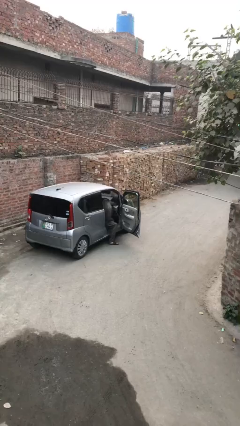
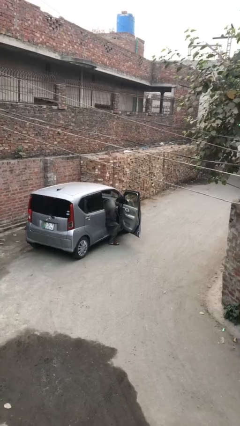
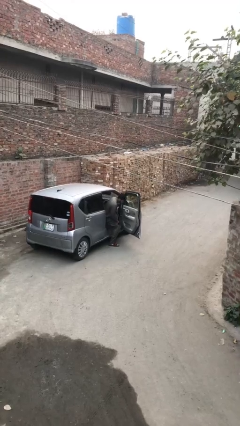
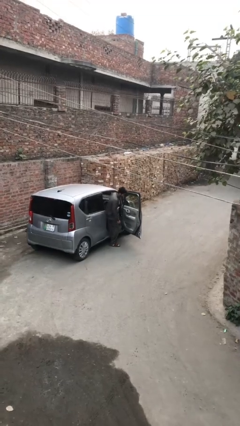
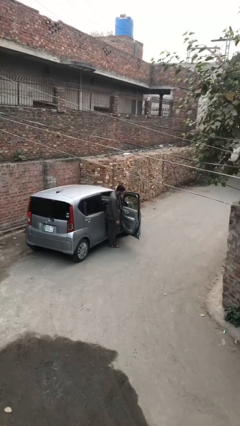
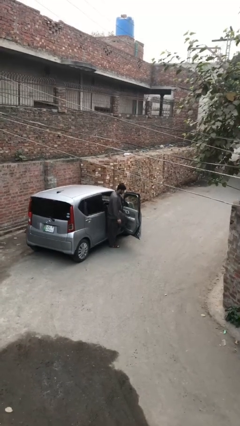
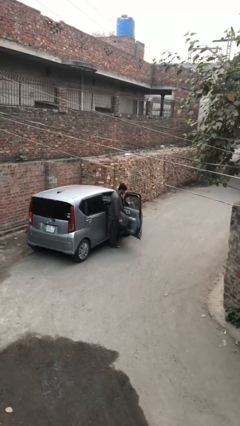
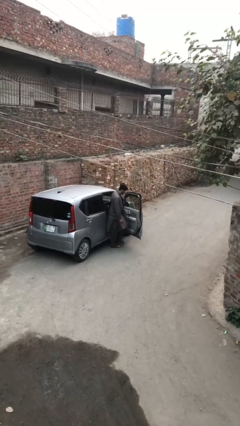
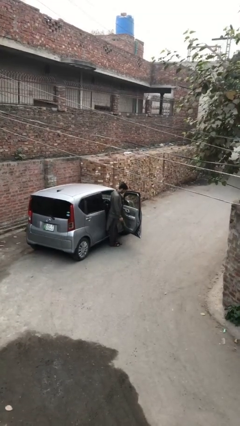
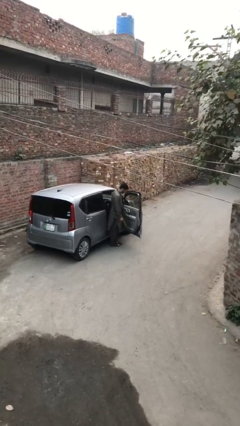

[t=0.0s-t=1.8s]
person exits car

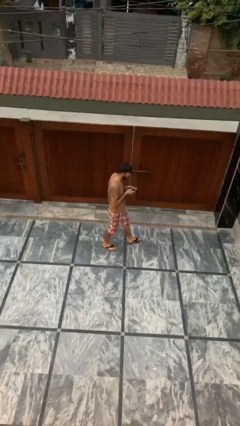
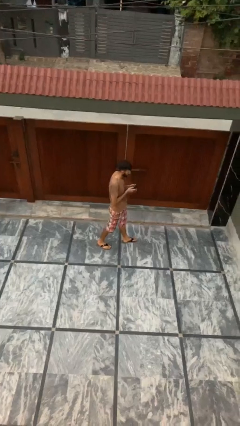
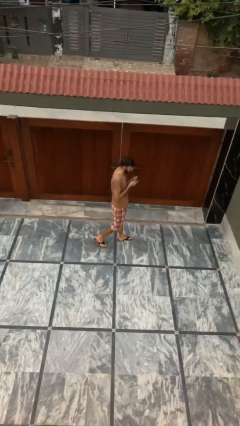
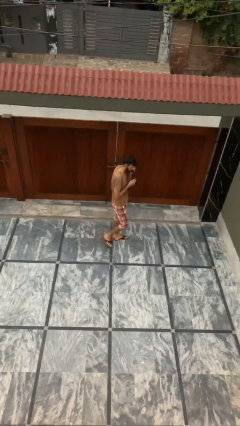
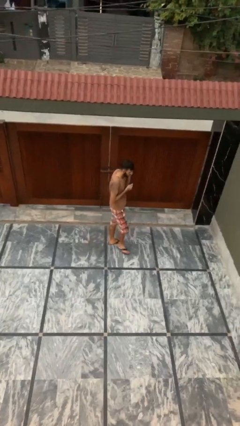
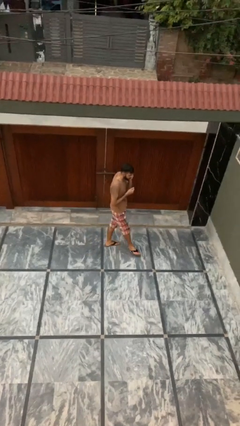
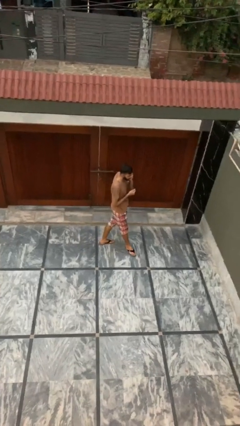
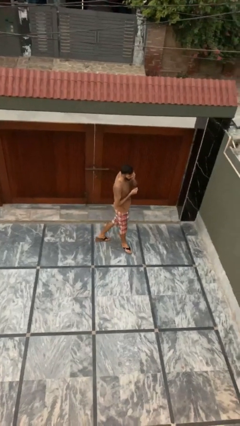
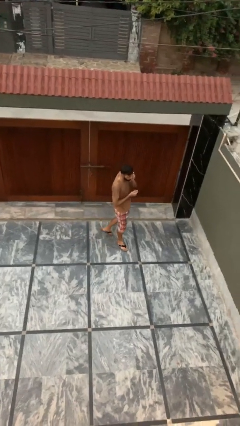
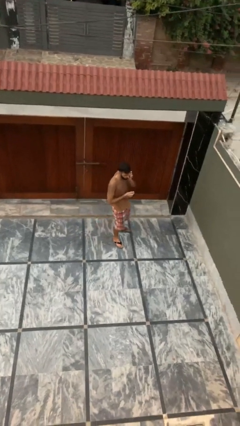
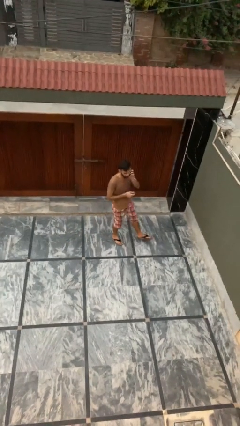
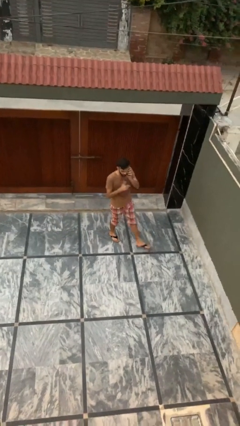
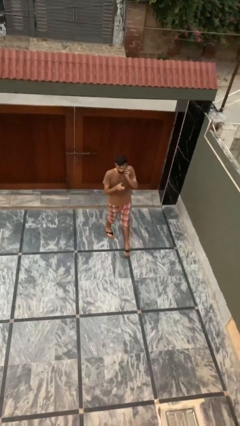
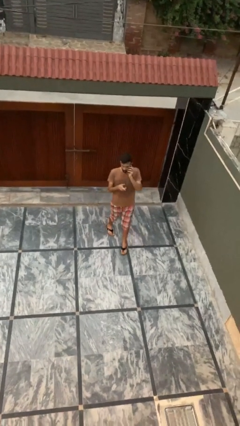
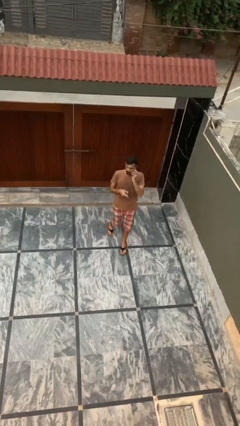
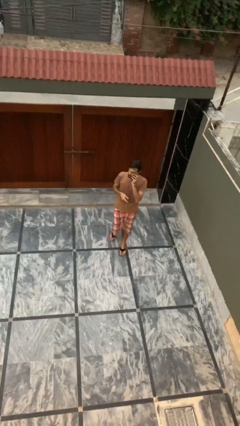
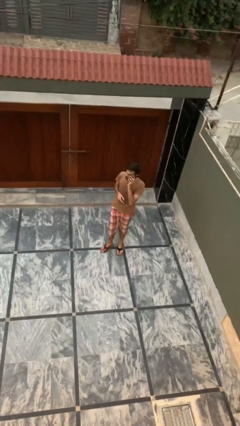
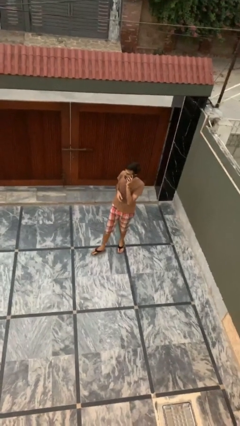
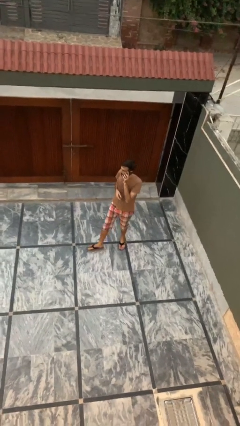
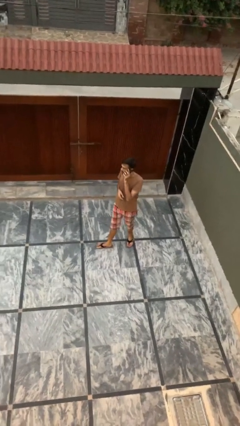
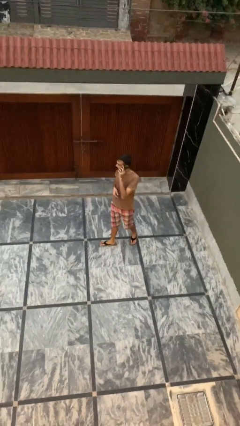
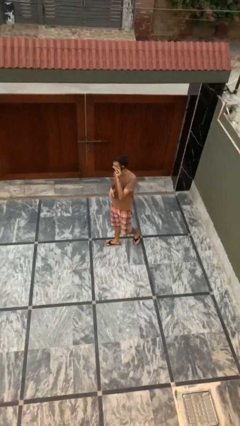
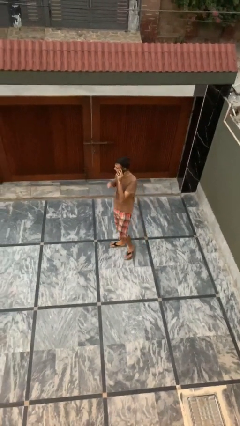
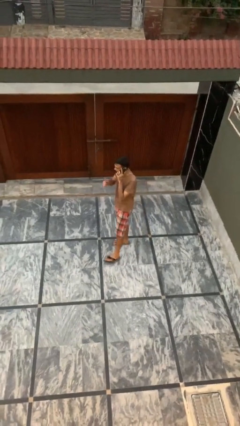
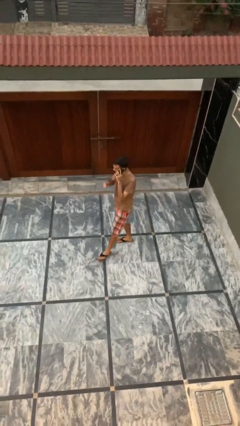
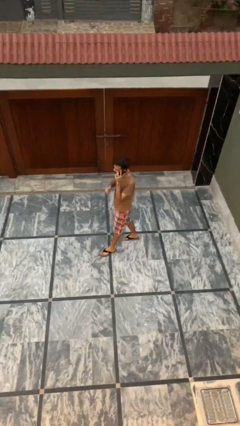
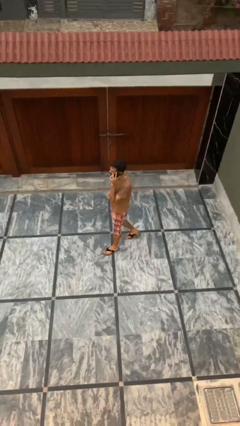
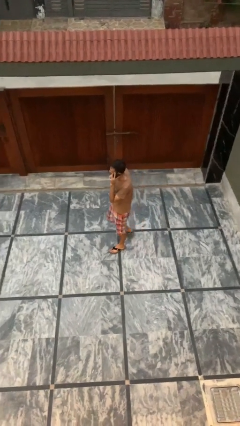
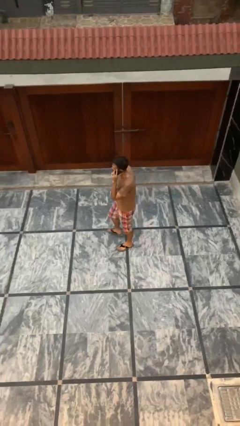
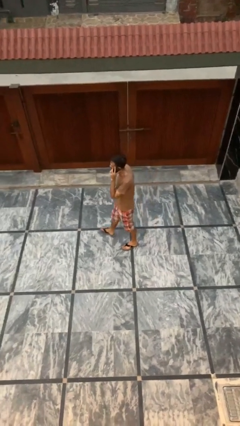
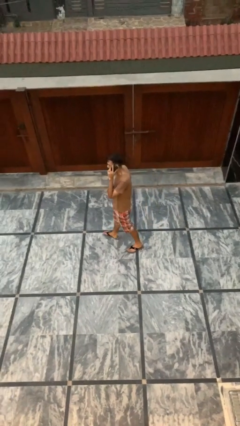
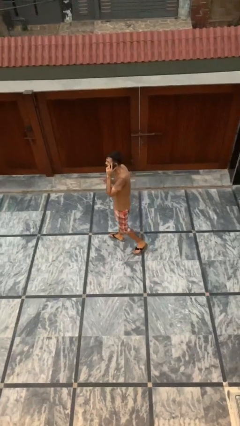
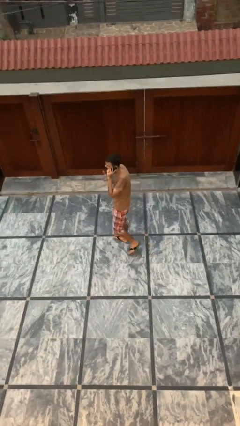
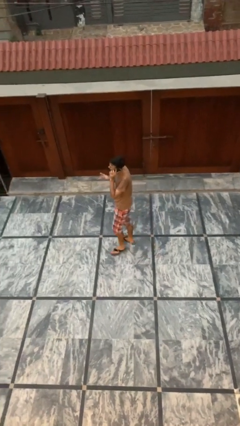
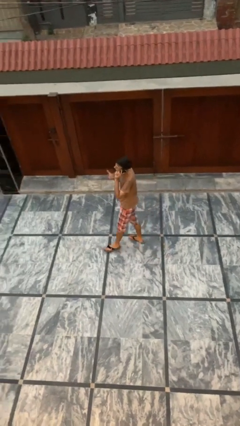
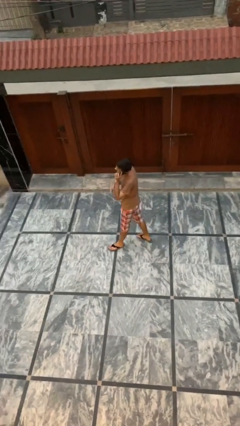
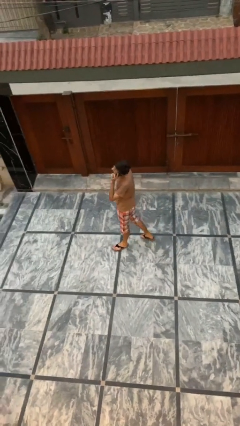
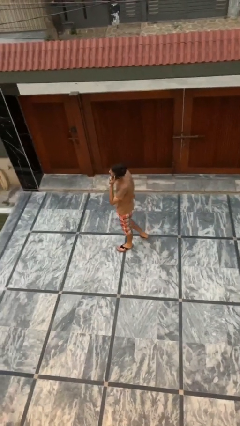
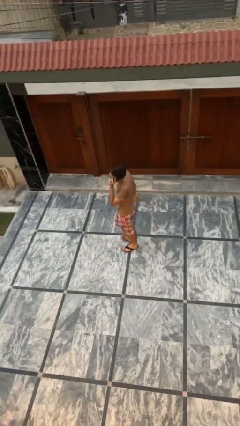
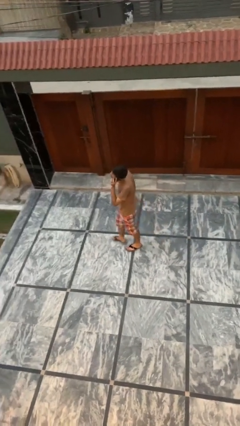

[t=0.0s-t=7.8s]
person talks on phone

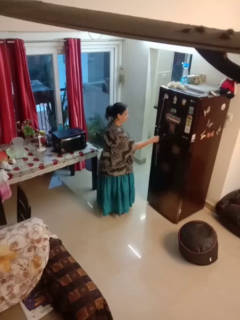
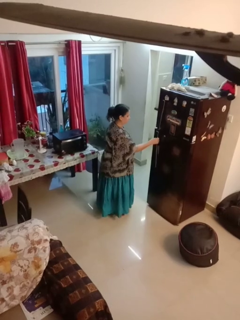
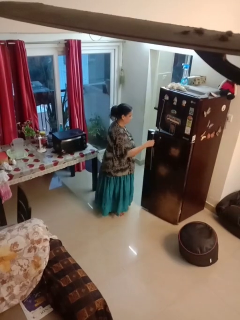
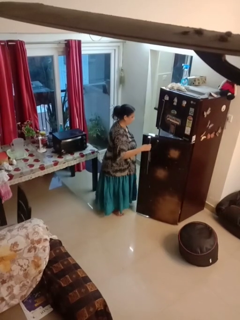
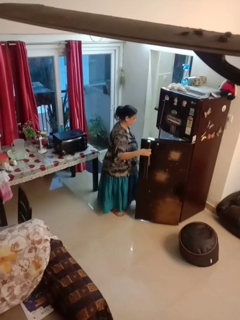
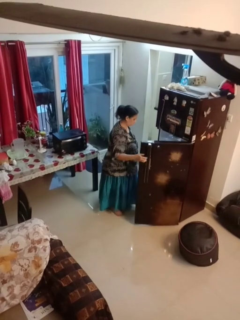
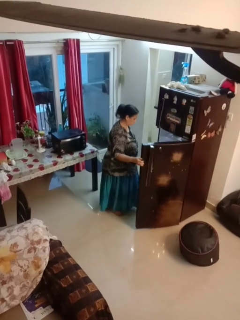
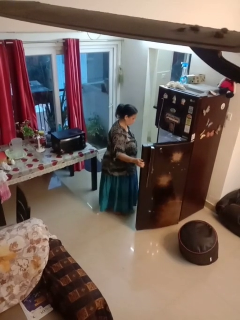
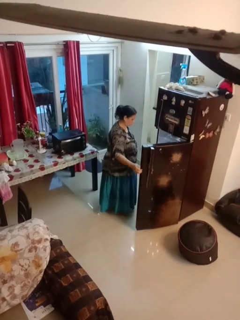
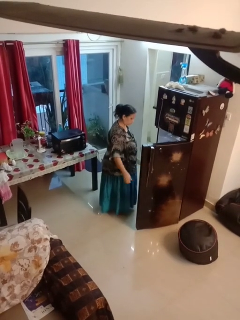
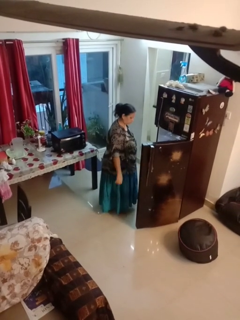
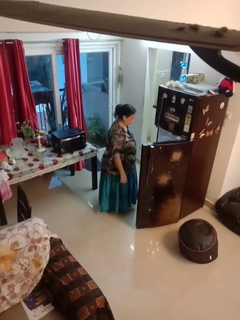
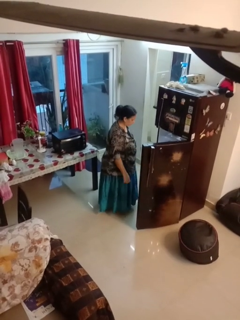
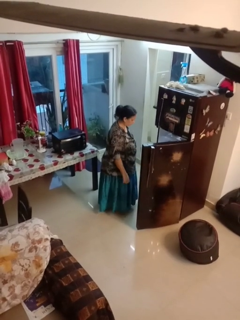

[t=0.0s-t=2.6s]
person opens refrigerator

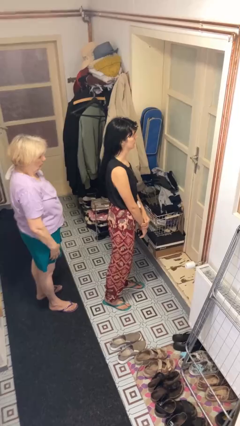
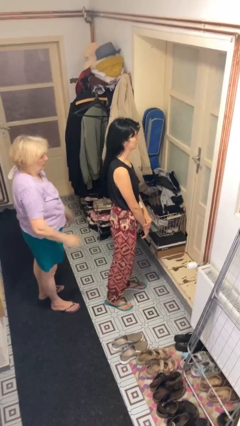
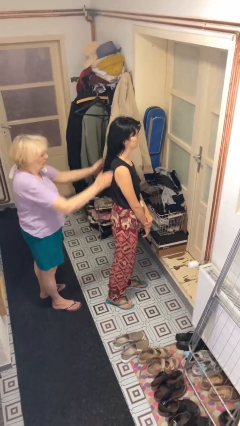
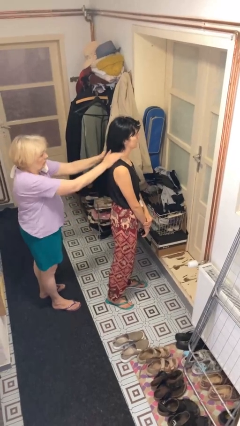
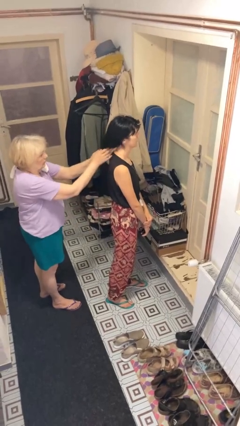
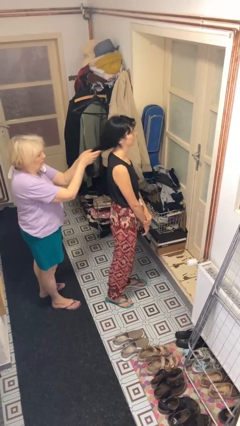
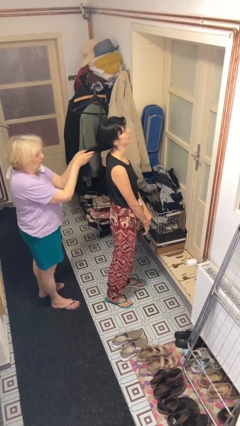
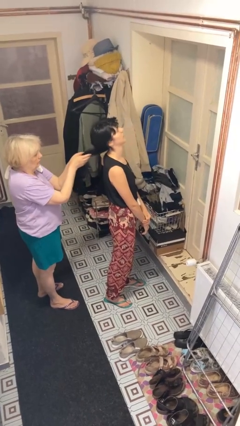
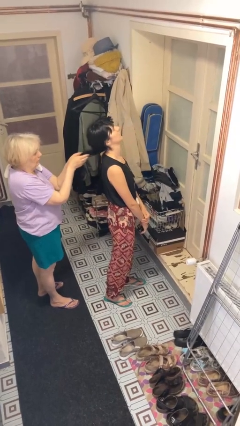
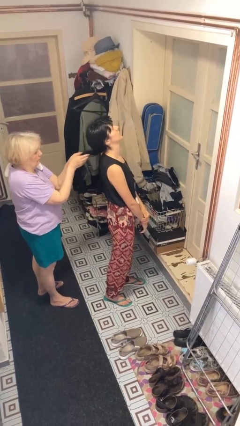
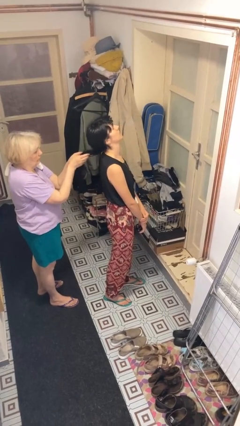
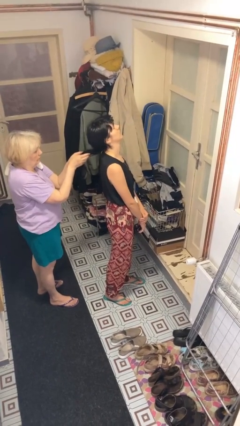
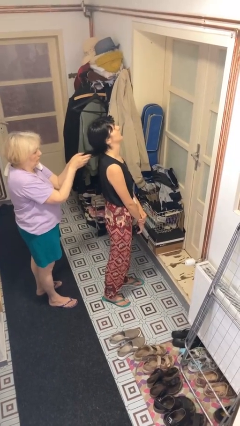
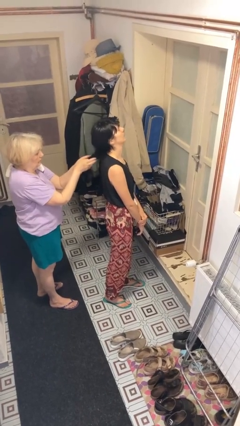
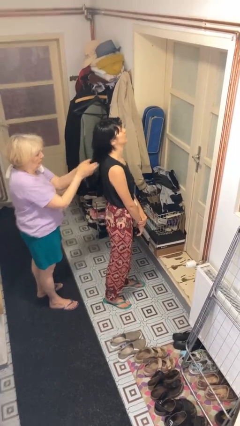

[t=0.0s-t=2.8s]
person grabs person by hair

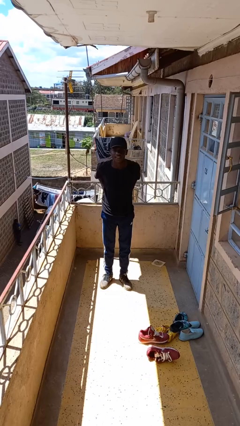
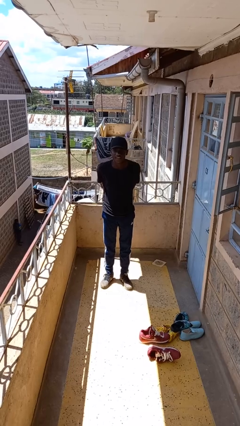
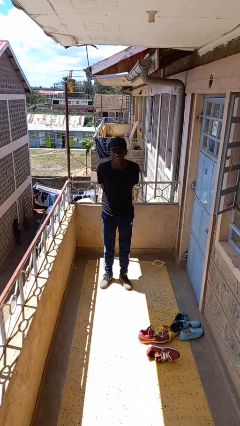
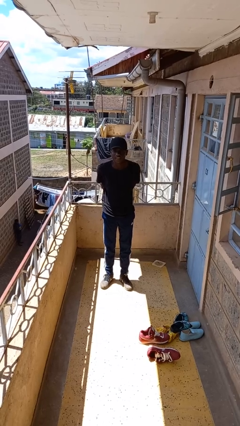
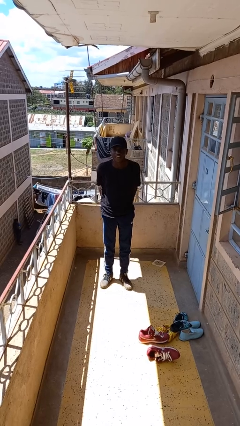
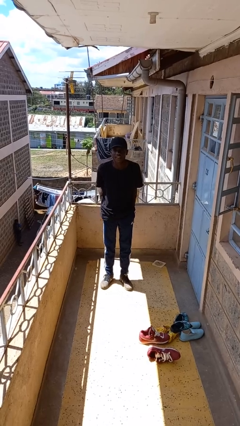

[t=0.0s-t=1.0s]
person puts hands in back pockets

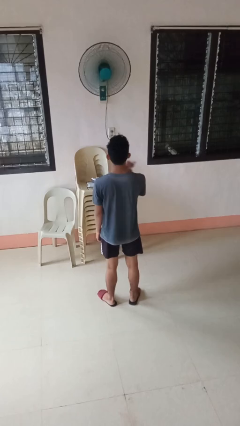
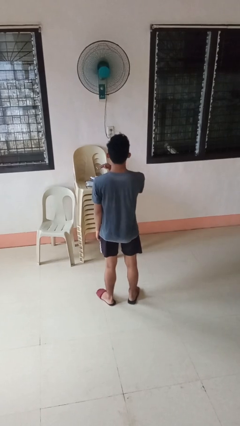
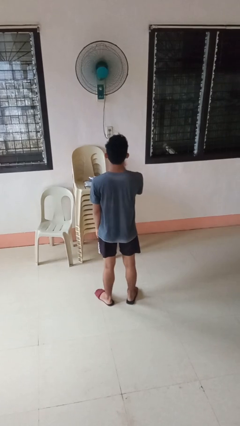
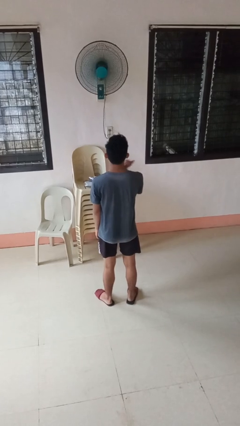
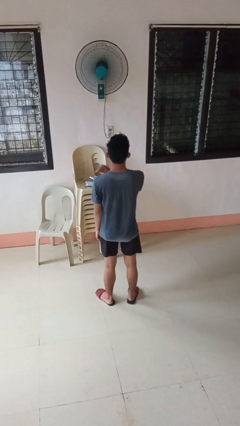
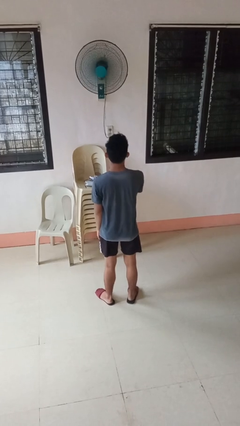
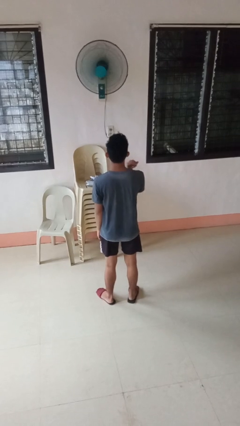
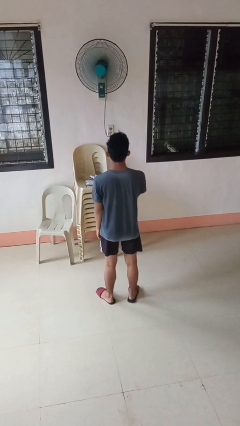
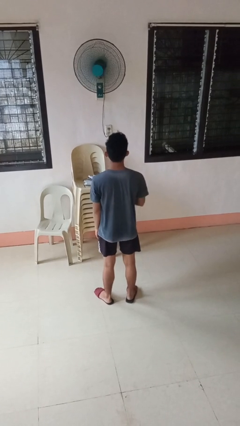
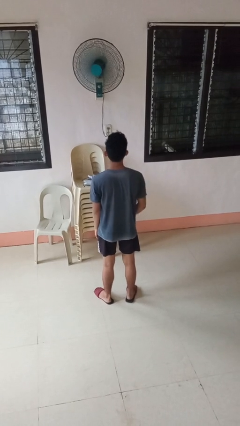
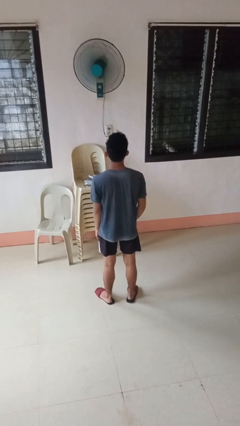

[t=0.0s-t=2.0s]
person gestures cut

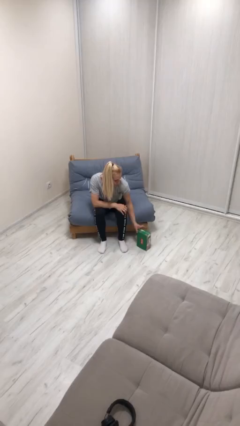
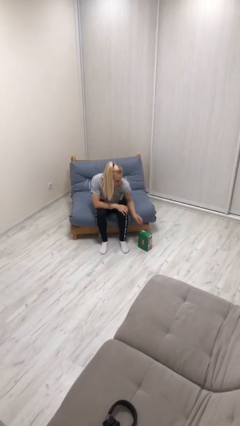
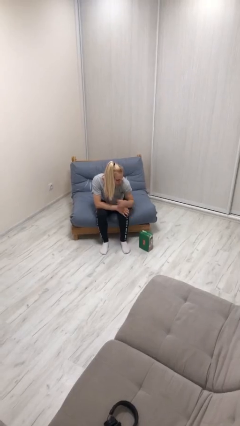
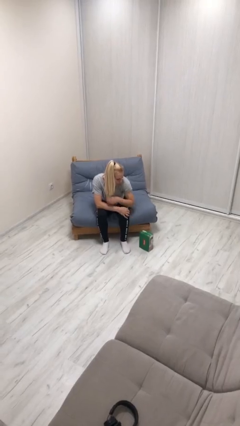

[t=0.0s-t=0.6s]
person puts down object on floor
